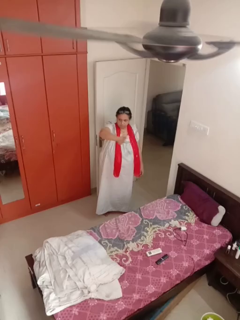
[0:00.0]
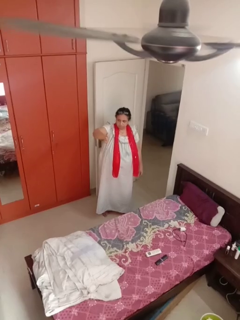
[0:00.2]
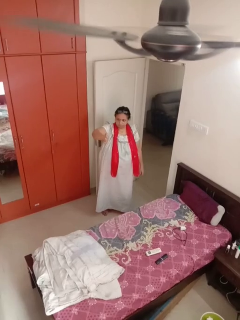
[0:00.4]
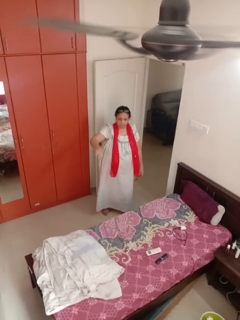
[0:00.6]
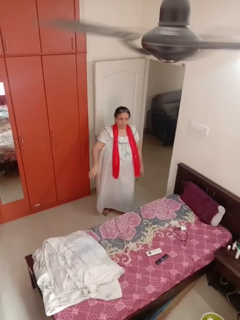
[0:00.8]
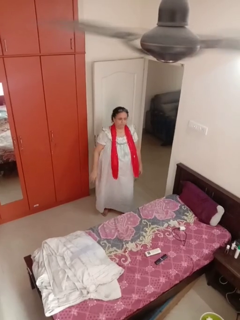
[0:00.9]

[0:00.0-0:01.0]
person gestures swipe right

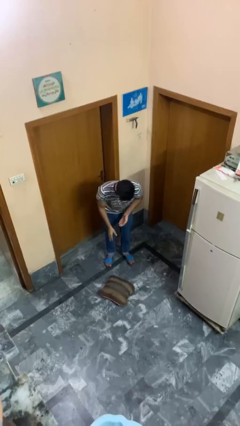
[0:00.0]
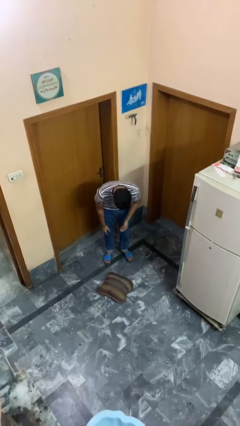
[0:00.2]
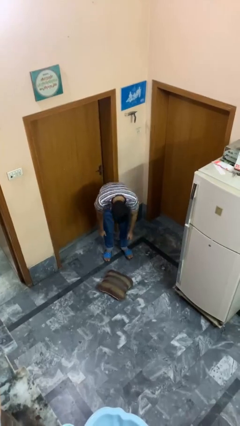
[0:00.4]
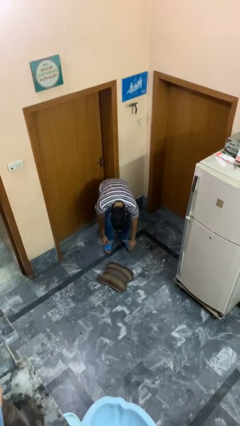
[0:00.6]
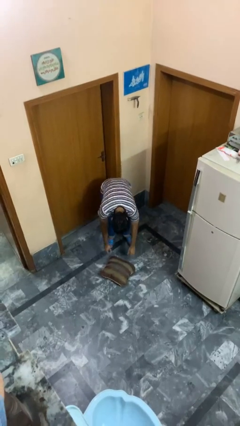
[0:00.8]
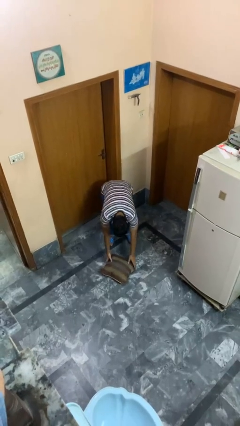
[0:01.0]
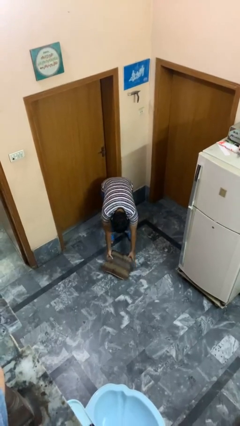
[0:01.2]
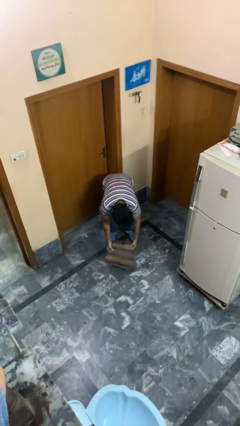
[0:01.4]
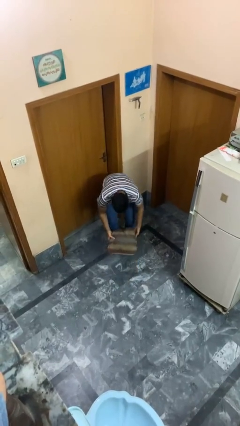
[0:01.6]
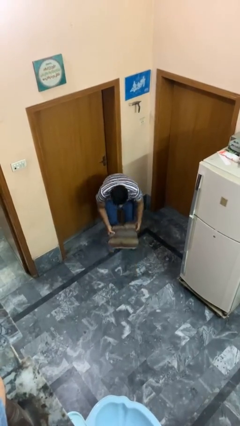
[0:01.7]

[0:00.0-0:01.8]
person picks up object from floor

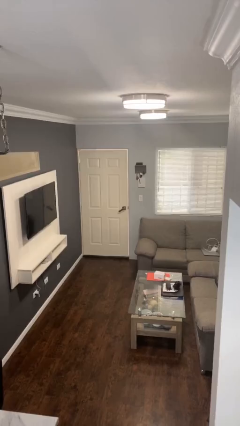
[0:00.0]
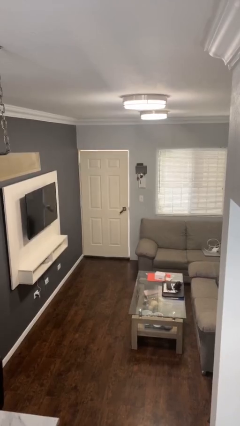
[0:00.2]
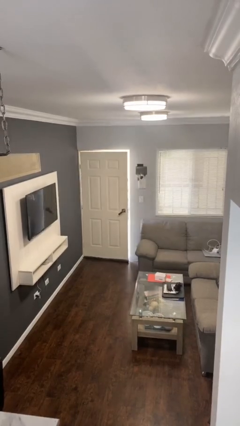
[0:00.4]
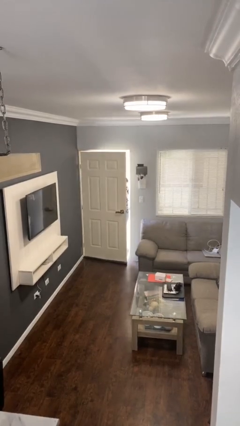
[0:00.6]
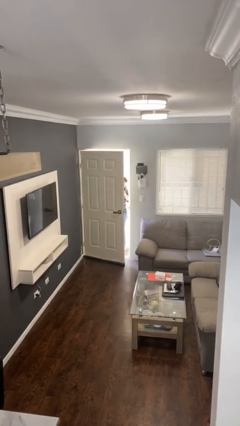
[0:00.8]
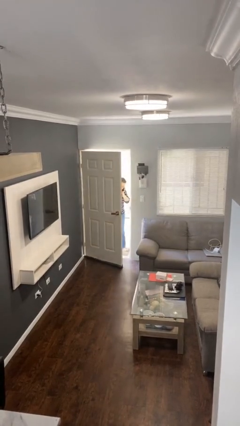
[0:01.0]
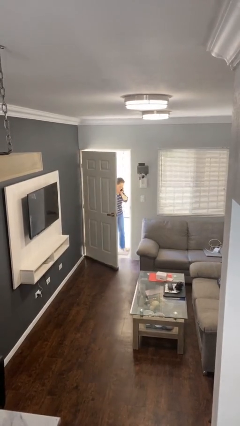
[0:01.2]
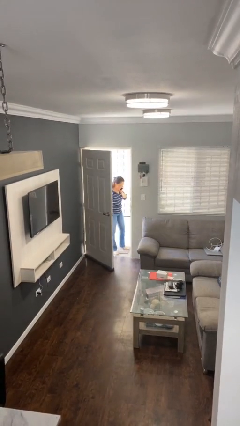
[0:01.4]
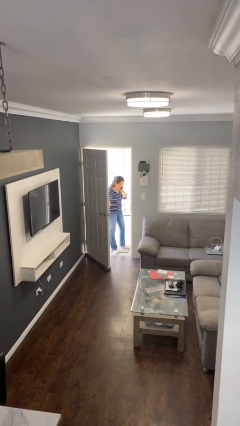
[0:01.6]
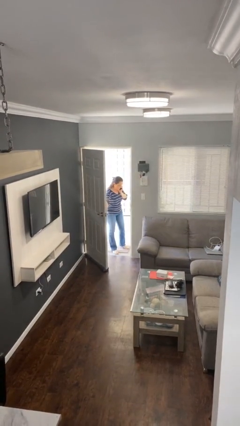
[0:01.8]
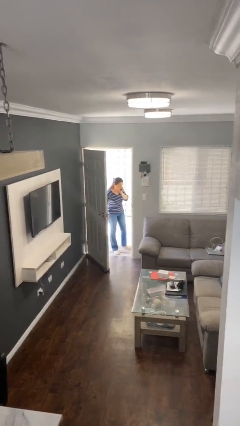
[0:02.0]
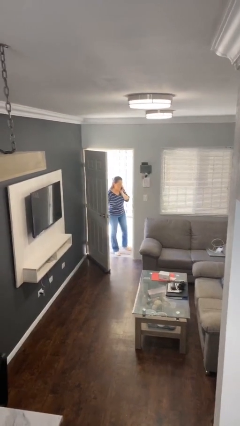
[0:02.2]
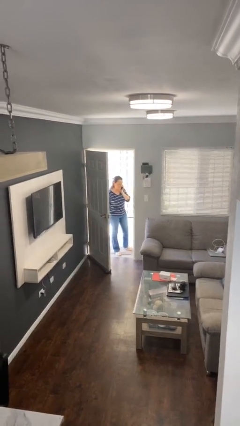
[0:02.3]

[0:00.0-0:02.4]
person opens facility door

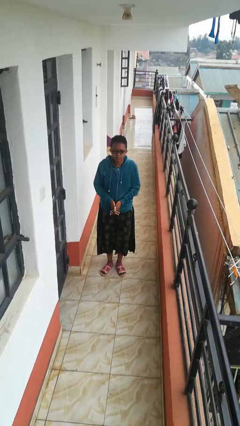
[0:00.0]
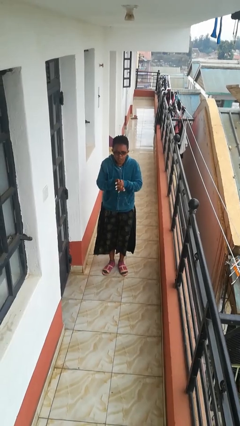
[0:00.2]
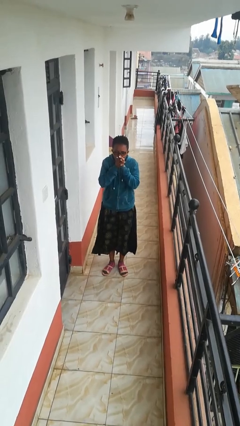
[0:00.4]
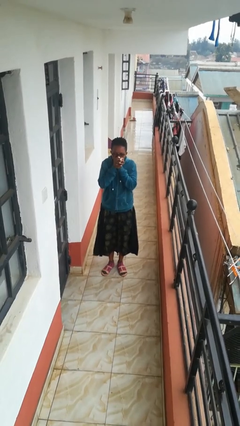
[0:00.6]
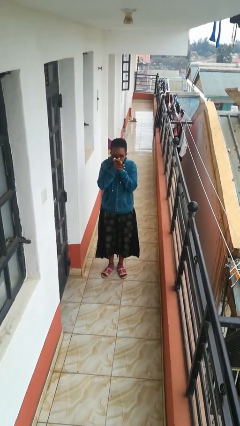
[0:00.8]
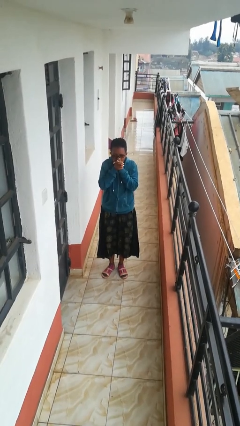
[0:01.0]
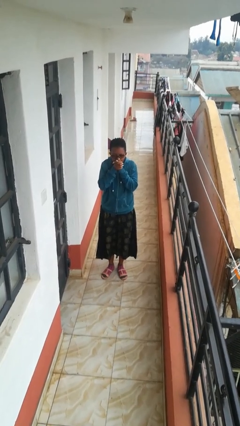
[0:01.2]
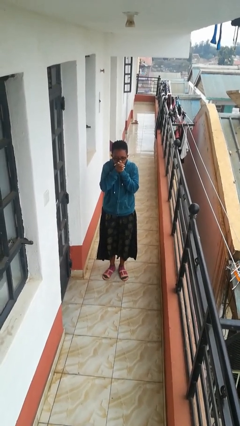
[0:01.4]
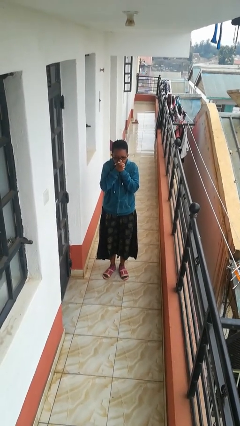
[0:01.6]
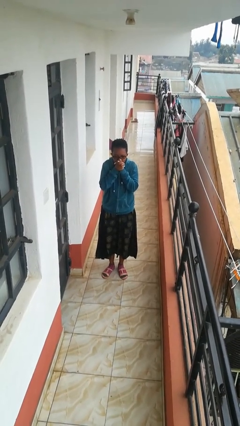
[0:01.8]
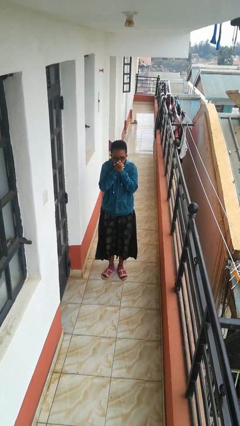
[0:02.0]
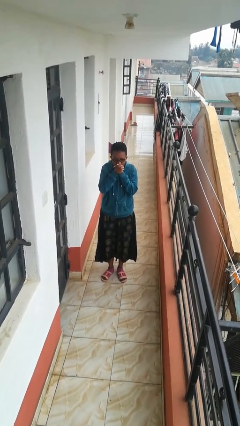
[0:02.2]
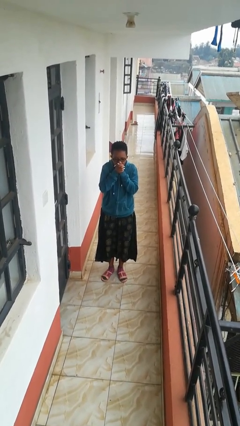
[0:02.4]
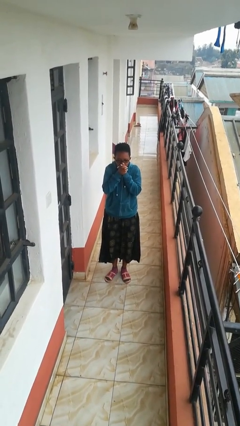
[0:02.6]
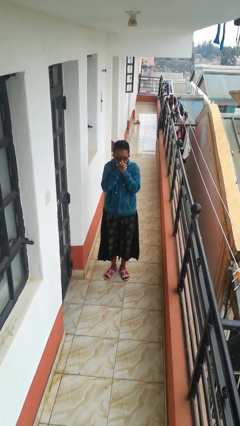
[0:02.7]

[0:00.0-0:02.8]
person blows into hands

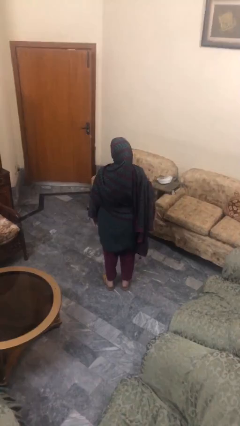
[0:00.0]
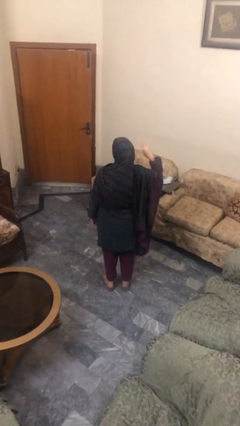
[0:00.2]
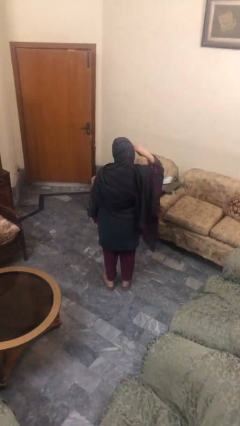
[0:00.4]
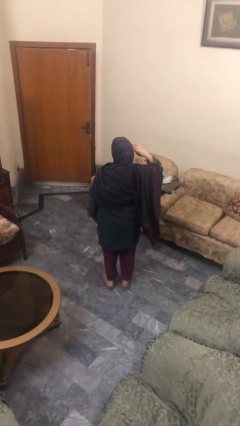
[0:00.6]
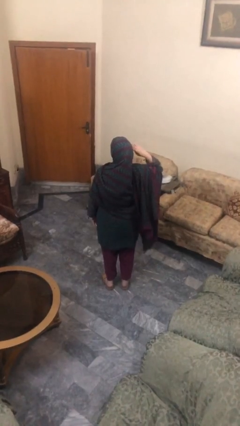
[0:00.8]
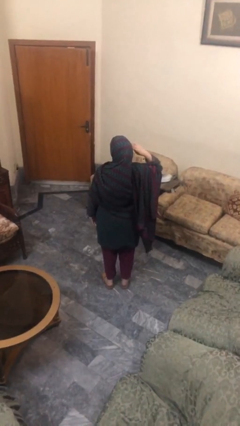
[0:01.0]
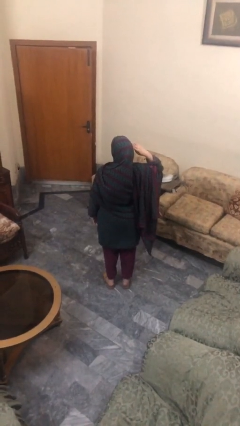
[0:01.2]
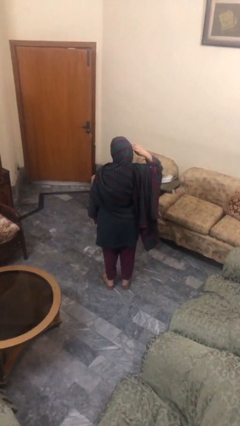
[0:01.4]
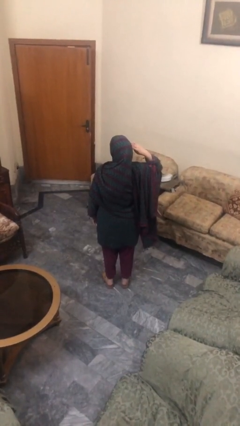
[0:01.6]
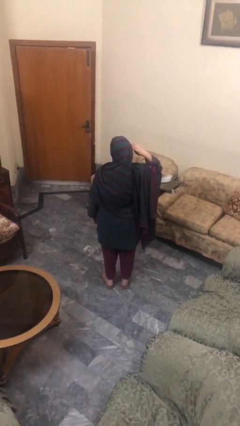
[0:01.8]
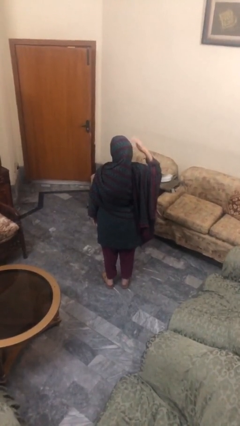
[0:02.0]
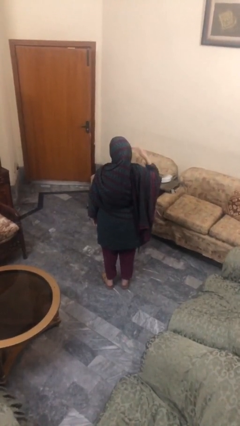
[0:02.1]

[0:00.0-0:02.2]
person salutes

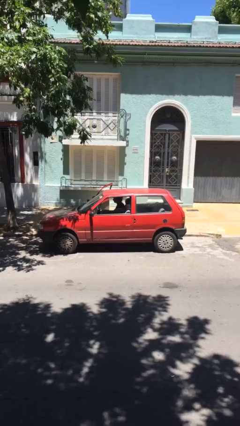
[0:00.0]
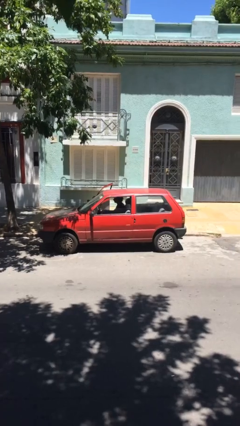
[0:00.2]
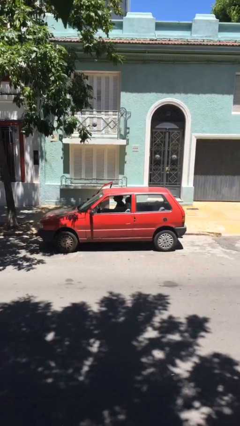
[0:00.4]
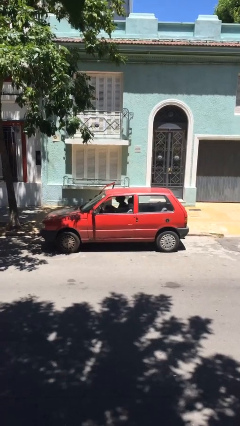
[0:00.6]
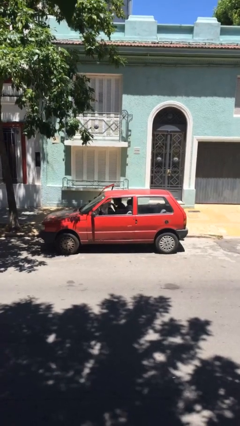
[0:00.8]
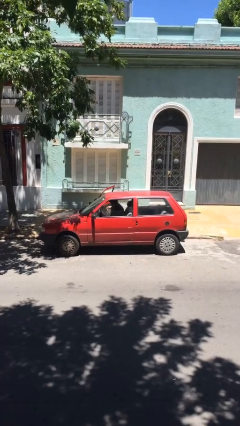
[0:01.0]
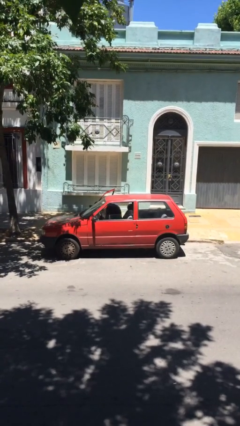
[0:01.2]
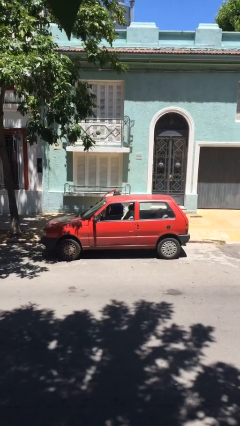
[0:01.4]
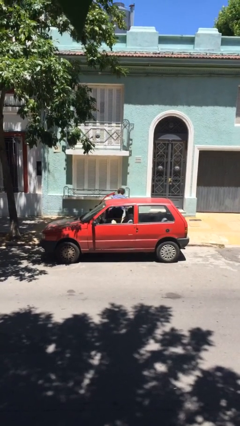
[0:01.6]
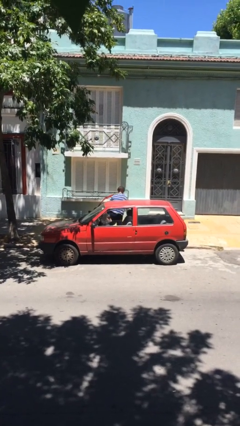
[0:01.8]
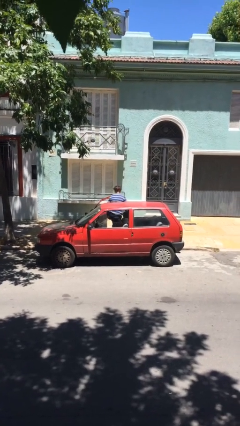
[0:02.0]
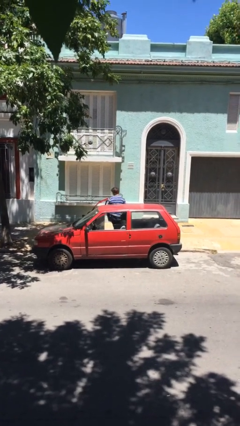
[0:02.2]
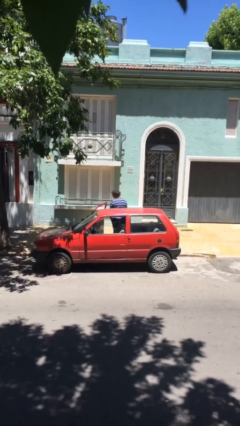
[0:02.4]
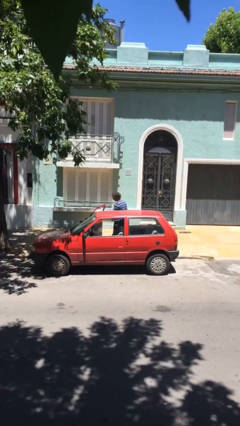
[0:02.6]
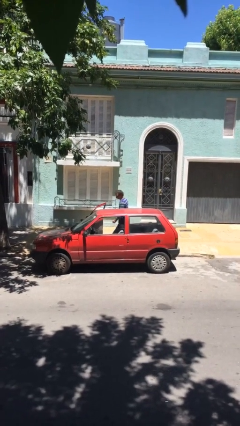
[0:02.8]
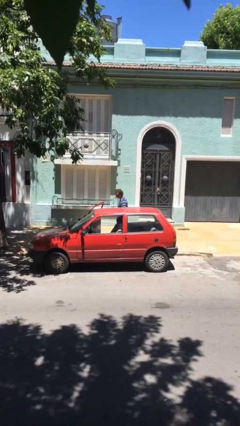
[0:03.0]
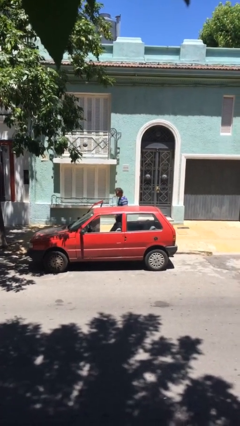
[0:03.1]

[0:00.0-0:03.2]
person exits car

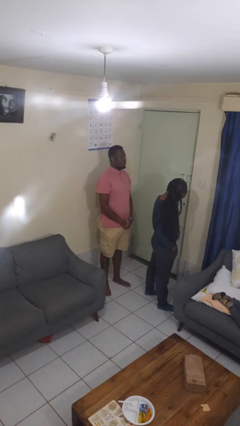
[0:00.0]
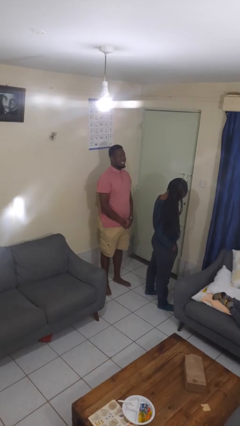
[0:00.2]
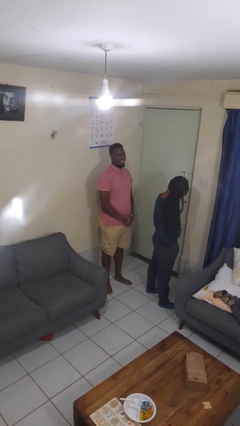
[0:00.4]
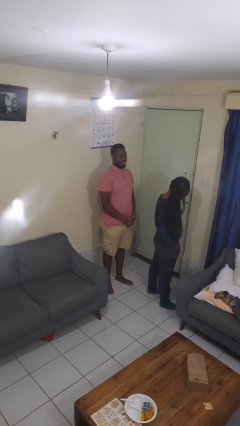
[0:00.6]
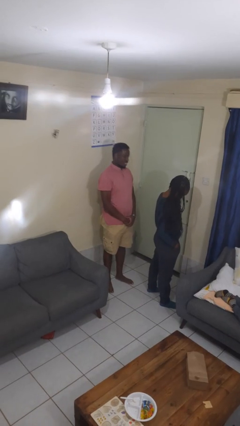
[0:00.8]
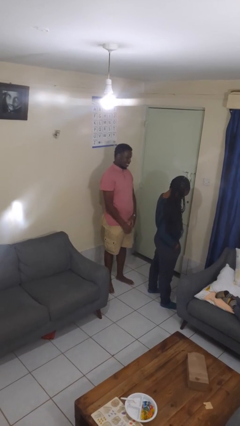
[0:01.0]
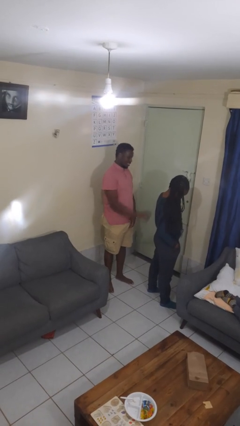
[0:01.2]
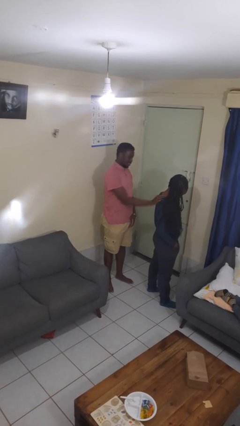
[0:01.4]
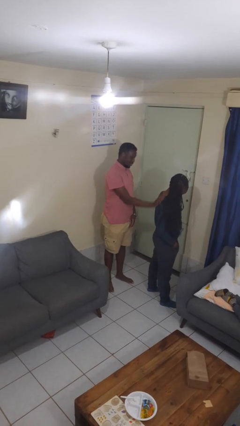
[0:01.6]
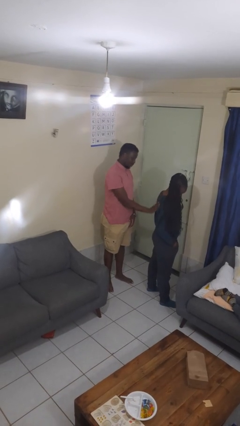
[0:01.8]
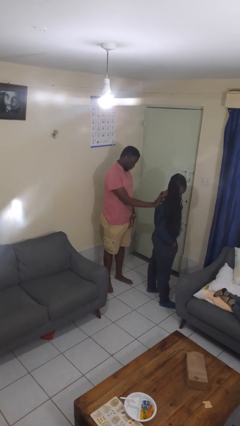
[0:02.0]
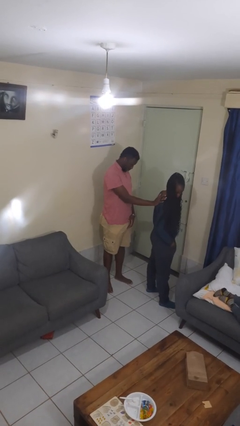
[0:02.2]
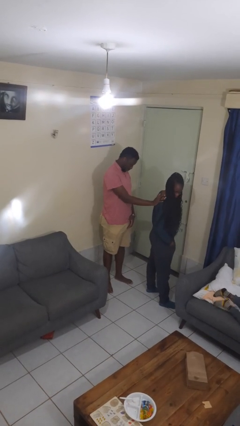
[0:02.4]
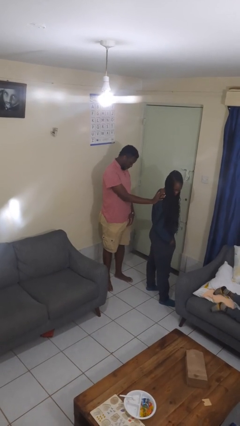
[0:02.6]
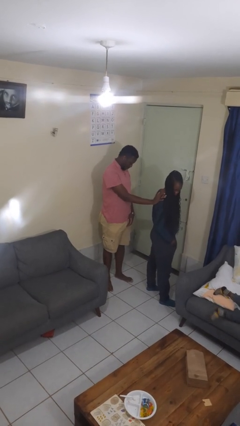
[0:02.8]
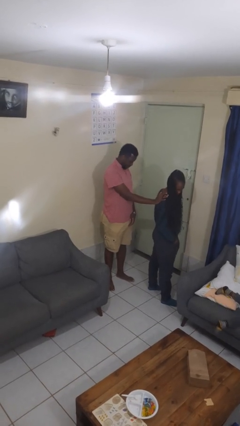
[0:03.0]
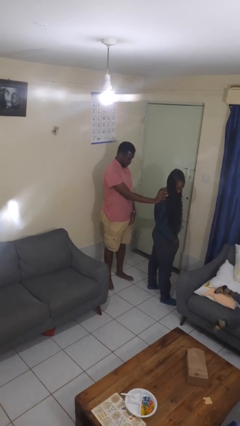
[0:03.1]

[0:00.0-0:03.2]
person touches back of person

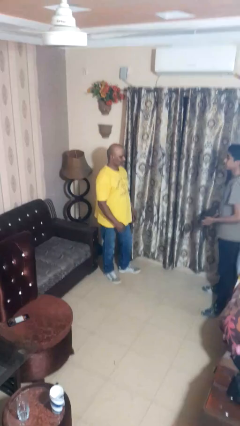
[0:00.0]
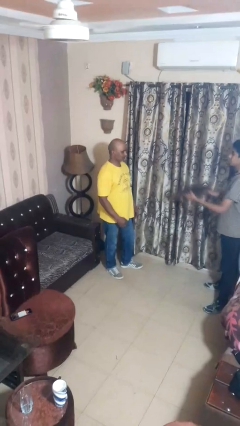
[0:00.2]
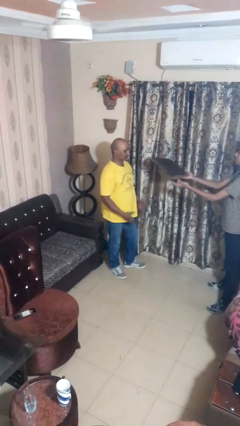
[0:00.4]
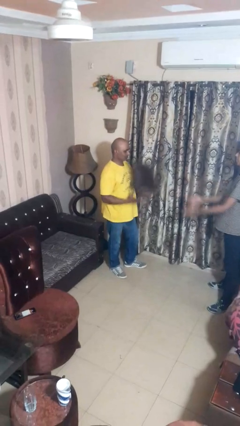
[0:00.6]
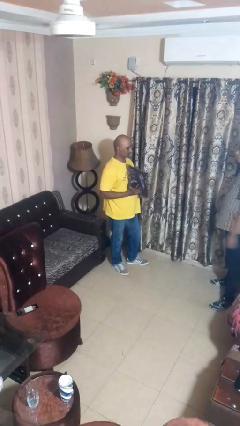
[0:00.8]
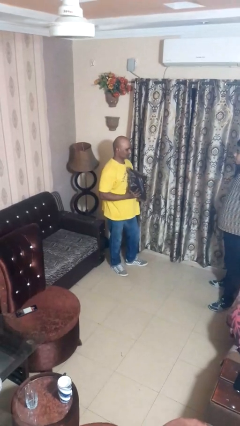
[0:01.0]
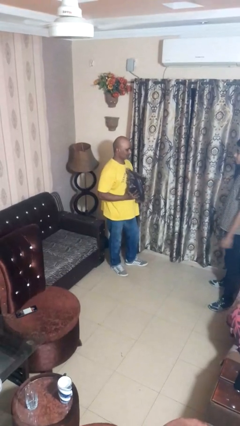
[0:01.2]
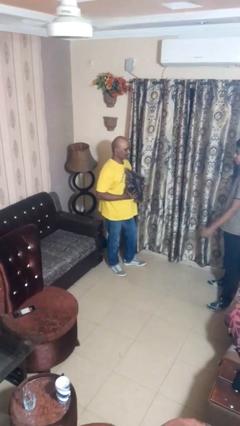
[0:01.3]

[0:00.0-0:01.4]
person catches object from person
